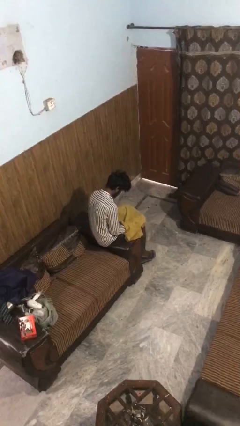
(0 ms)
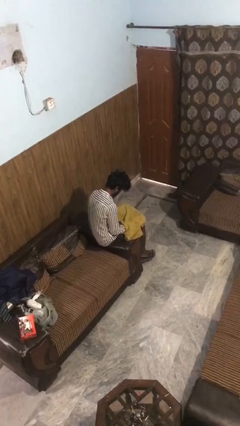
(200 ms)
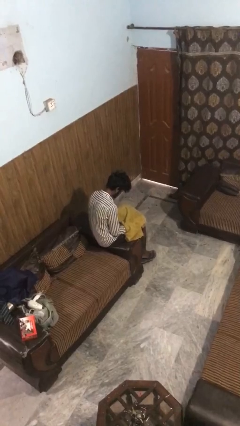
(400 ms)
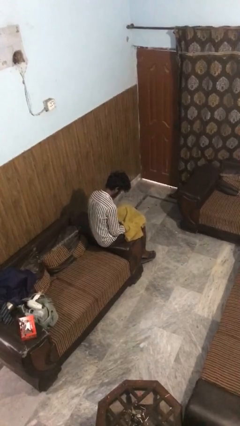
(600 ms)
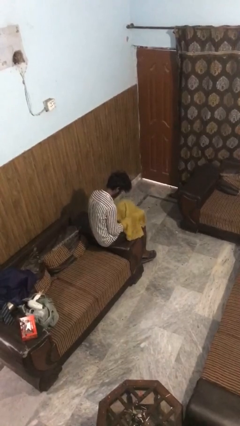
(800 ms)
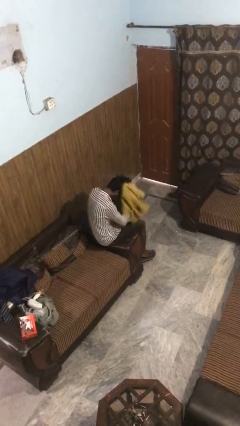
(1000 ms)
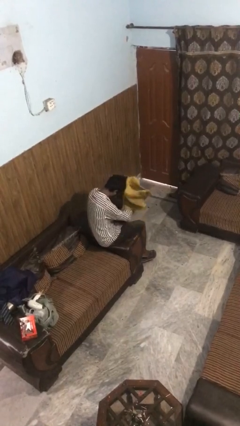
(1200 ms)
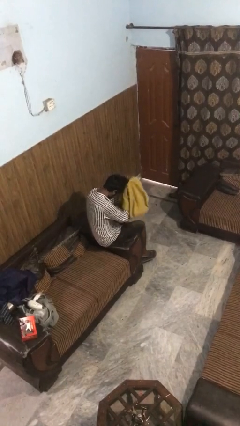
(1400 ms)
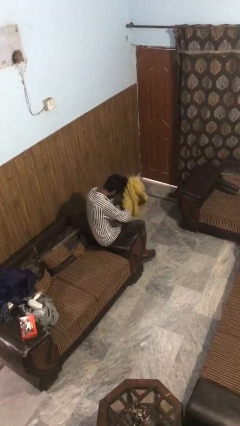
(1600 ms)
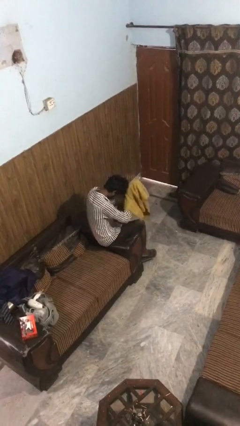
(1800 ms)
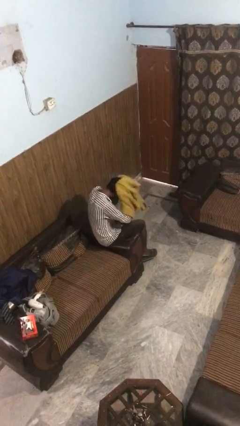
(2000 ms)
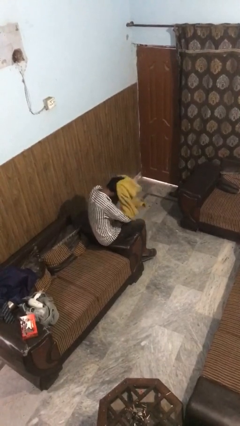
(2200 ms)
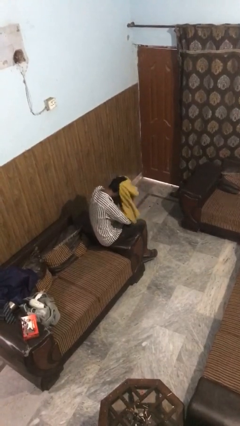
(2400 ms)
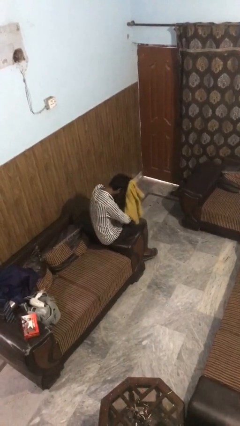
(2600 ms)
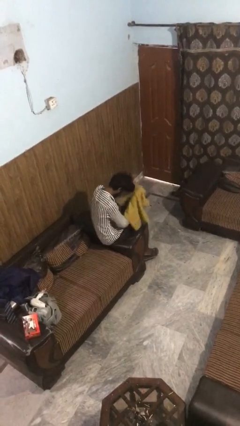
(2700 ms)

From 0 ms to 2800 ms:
person dries hair with towel

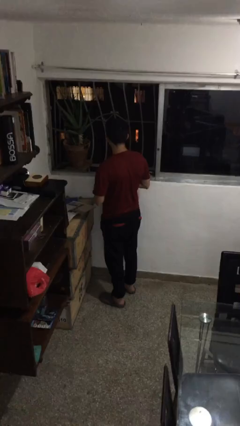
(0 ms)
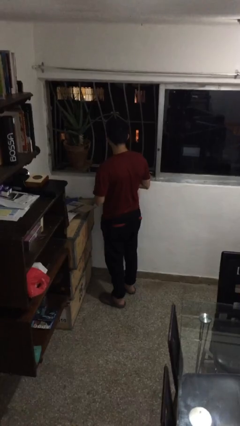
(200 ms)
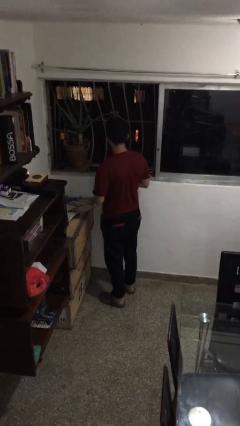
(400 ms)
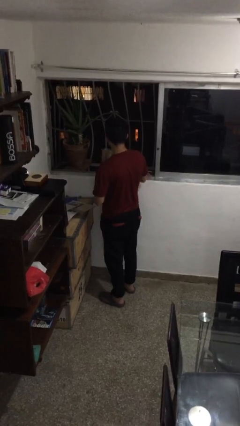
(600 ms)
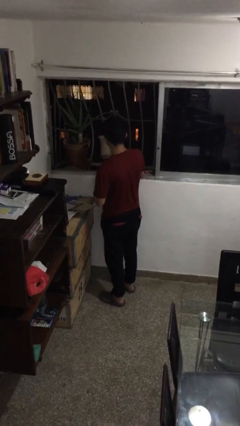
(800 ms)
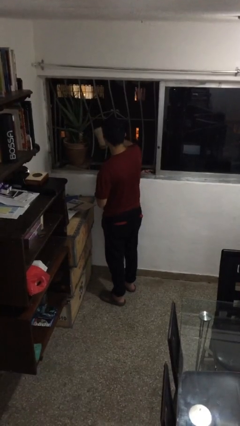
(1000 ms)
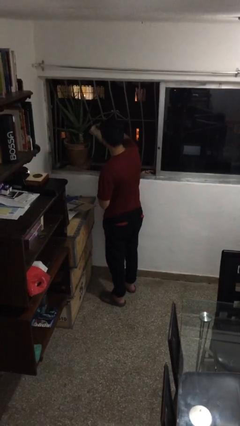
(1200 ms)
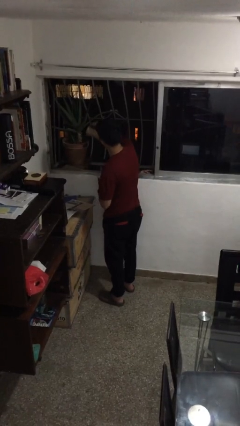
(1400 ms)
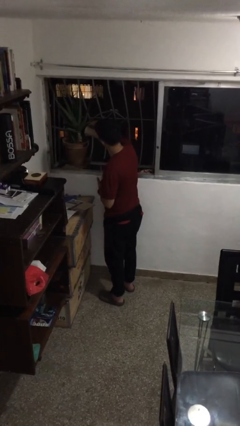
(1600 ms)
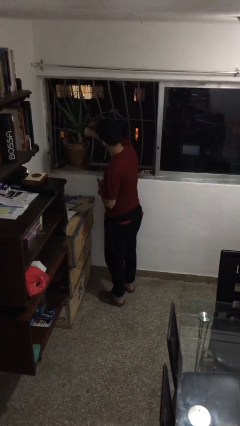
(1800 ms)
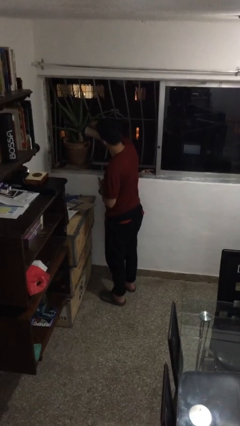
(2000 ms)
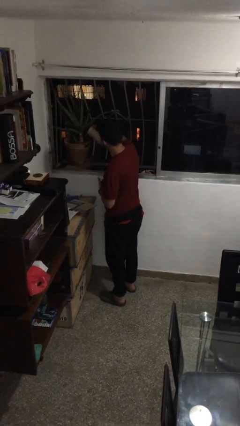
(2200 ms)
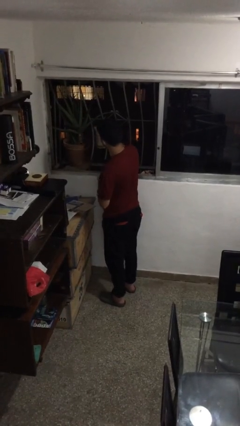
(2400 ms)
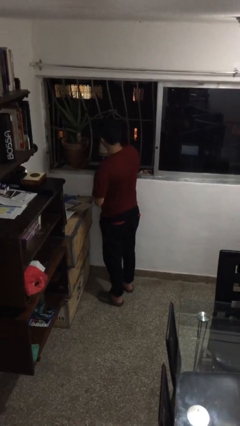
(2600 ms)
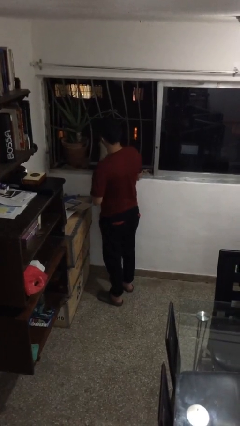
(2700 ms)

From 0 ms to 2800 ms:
person waters houseplant

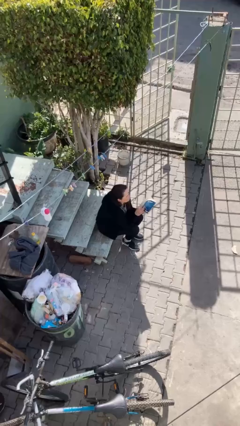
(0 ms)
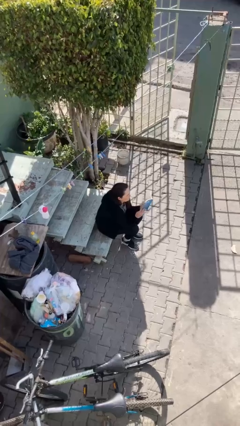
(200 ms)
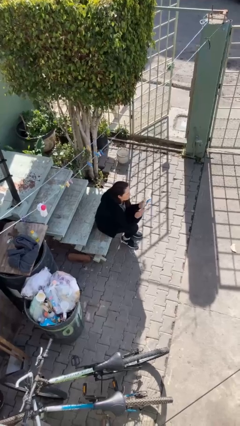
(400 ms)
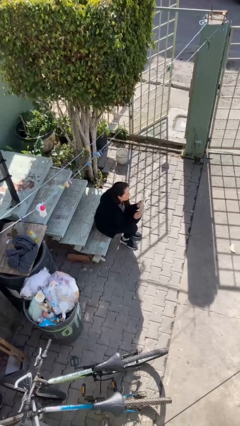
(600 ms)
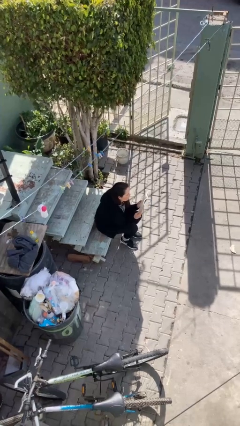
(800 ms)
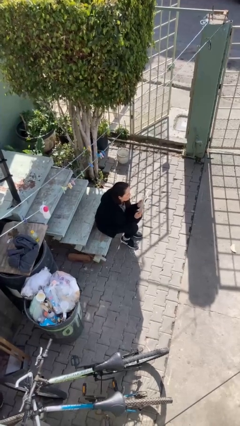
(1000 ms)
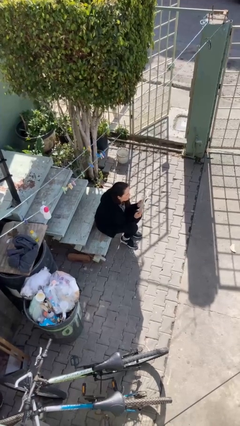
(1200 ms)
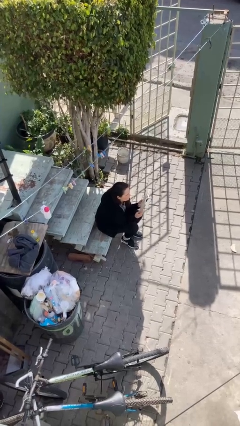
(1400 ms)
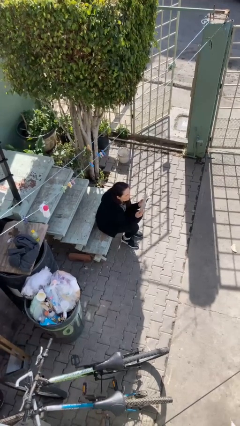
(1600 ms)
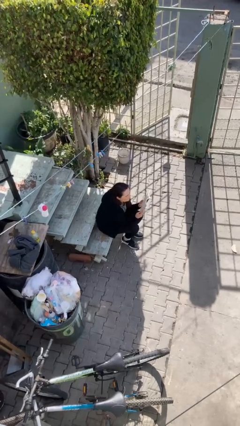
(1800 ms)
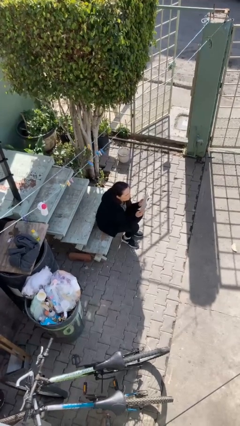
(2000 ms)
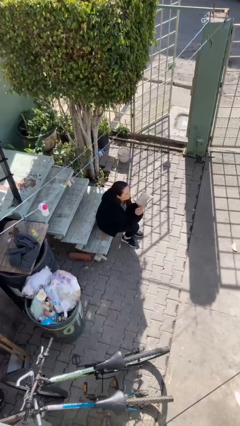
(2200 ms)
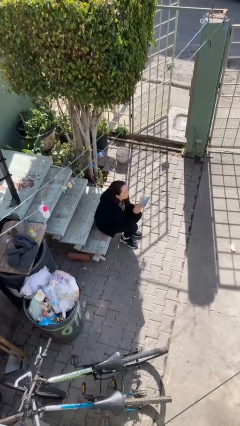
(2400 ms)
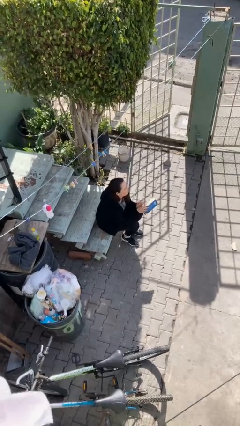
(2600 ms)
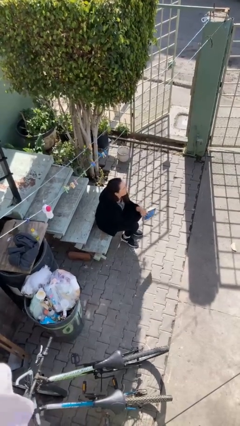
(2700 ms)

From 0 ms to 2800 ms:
person reads document

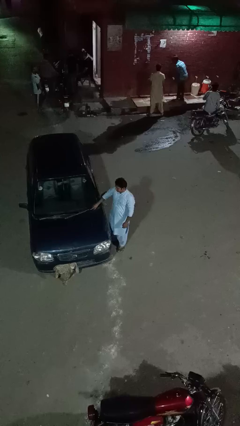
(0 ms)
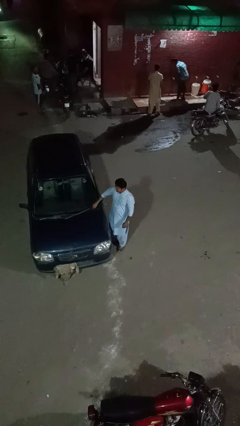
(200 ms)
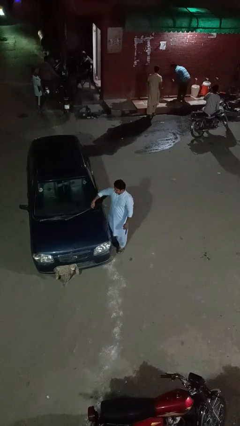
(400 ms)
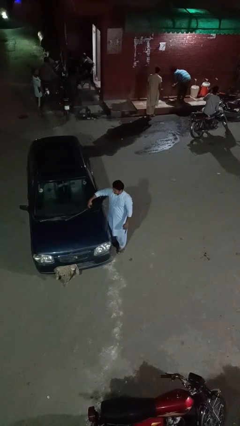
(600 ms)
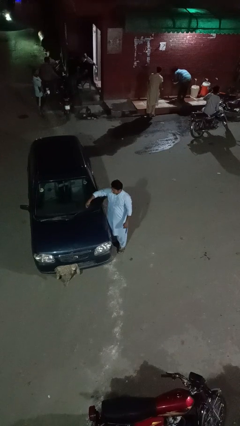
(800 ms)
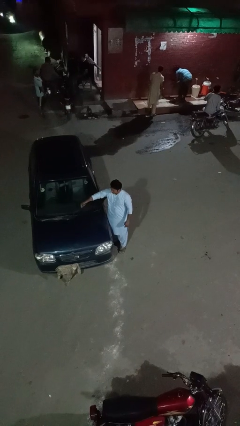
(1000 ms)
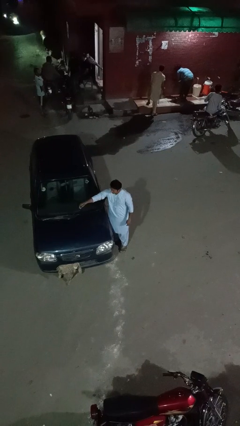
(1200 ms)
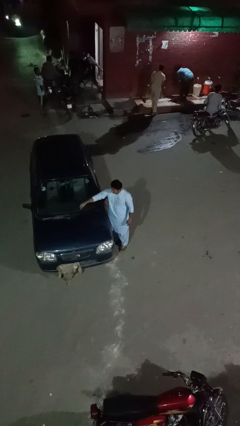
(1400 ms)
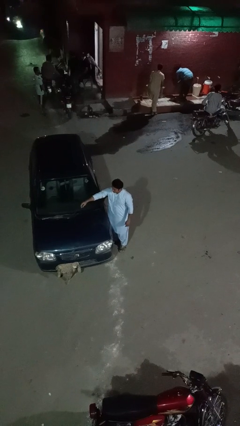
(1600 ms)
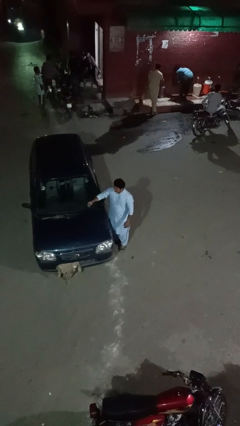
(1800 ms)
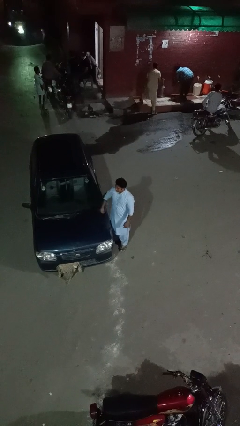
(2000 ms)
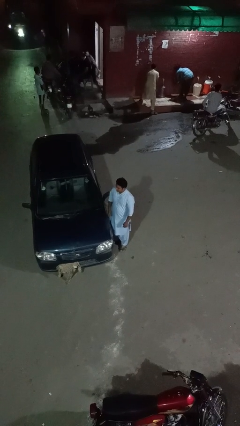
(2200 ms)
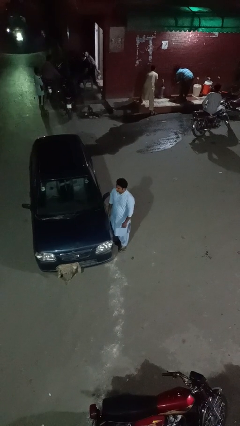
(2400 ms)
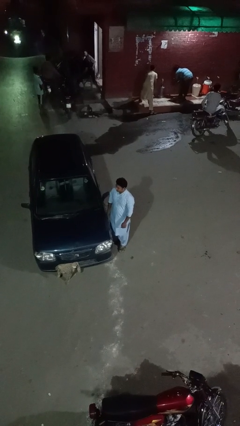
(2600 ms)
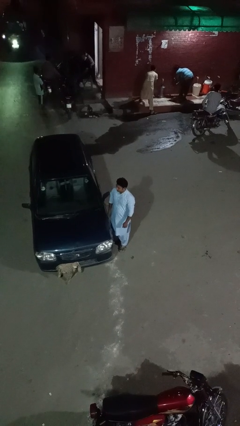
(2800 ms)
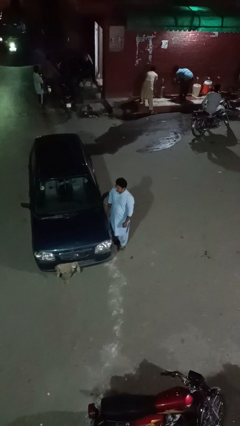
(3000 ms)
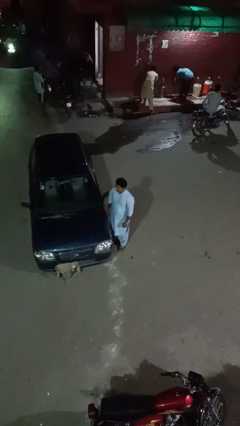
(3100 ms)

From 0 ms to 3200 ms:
person flips up car wipers

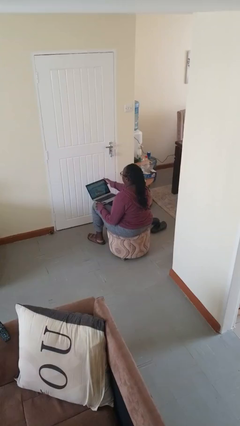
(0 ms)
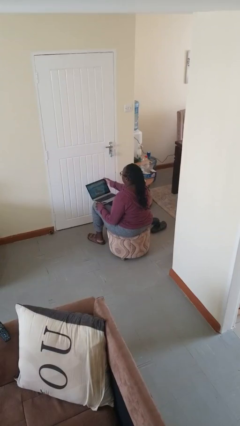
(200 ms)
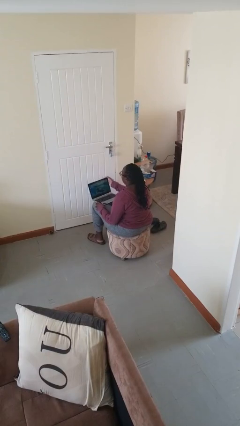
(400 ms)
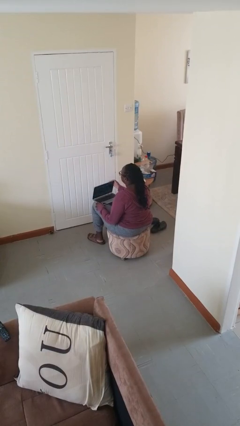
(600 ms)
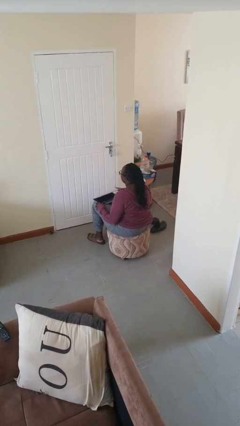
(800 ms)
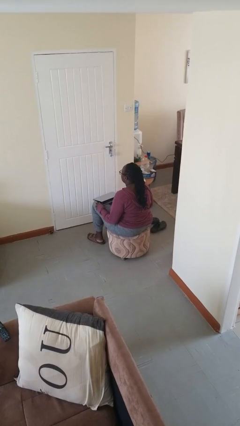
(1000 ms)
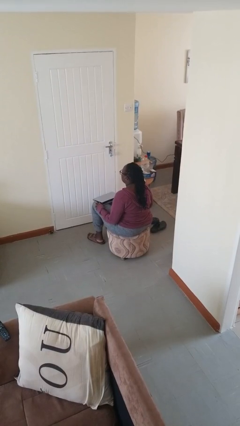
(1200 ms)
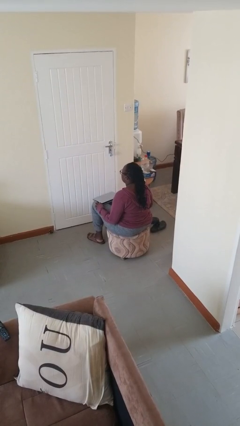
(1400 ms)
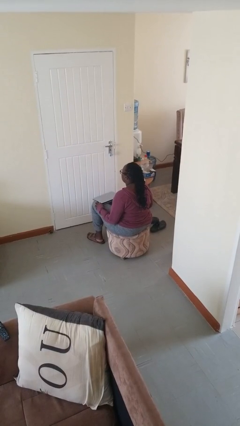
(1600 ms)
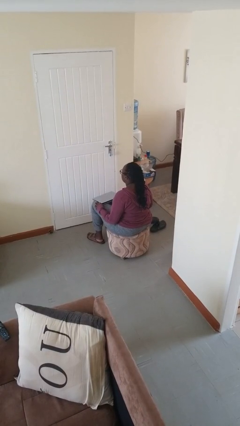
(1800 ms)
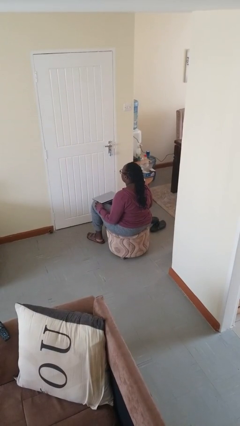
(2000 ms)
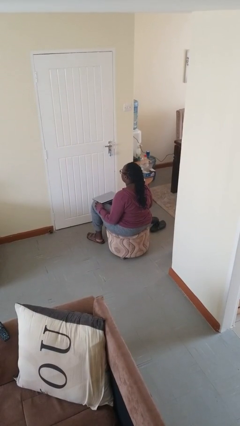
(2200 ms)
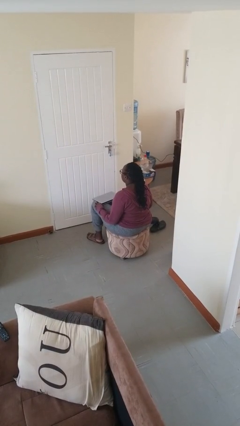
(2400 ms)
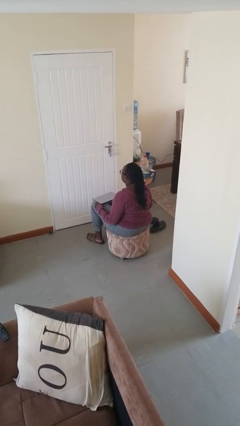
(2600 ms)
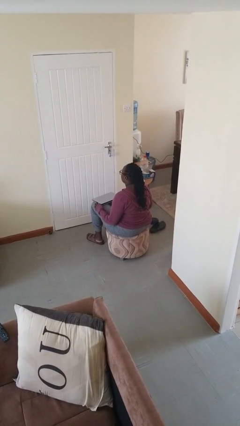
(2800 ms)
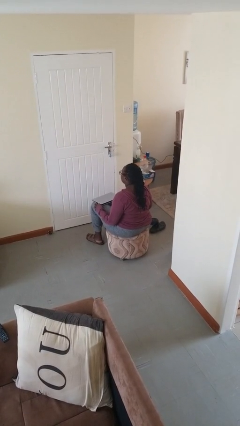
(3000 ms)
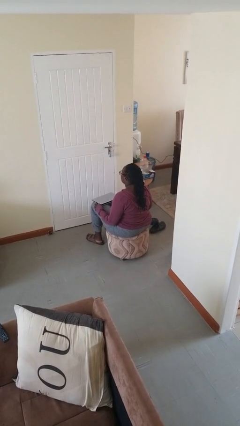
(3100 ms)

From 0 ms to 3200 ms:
person closes laptop

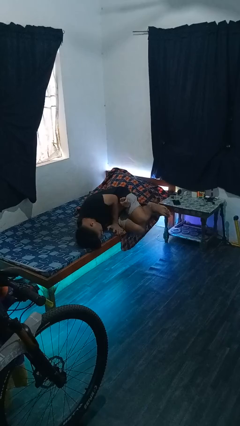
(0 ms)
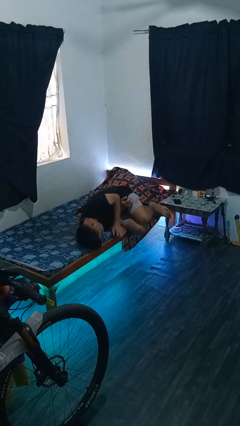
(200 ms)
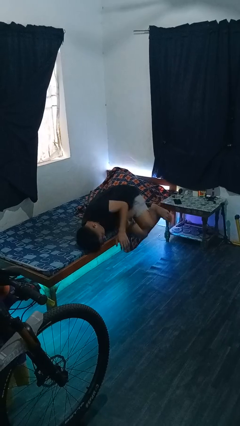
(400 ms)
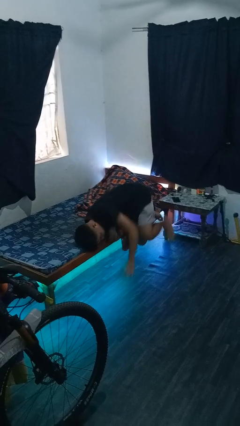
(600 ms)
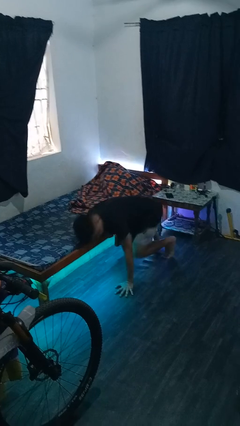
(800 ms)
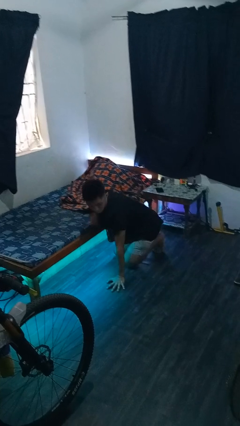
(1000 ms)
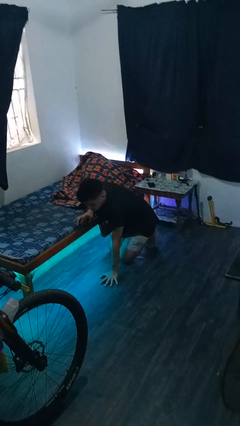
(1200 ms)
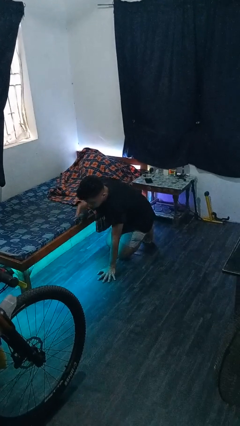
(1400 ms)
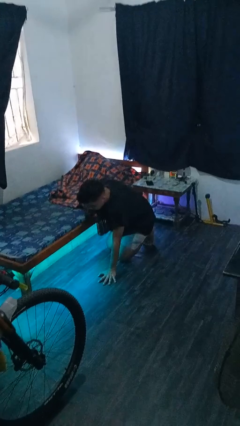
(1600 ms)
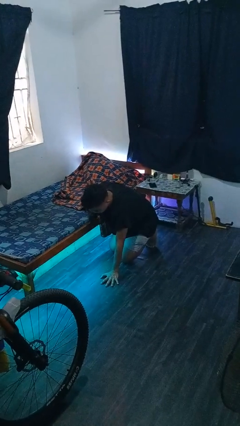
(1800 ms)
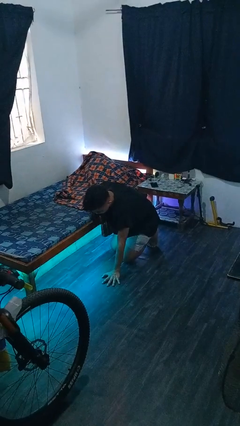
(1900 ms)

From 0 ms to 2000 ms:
person falls from bed

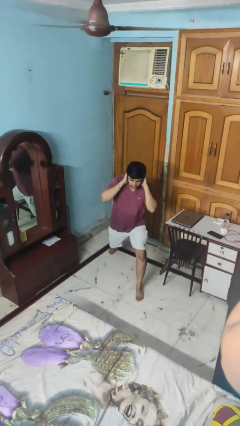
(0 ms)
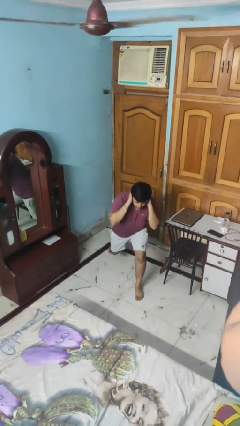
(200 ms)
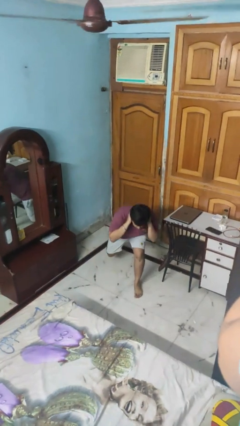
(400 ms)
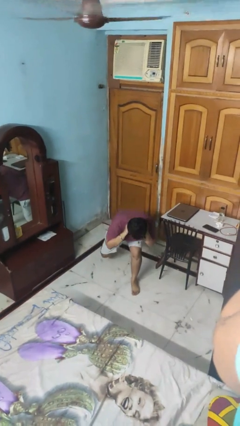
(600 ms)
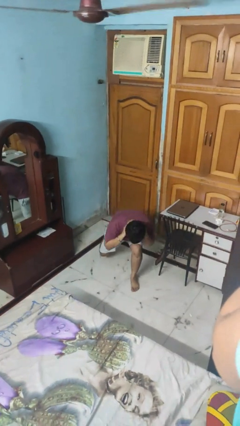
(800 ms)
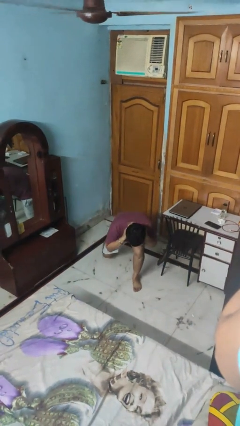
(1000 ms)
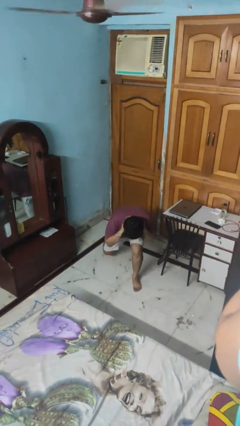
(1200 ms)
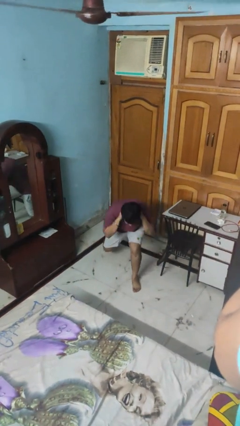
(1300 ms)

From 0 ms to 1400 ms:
person exercises with lunges
